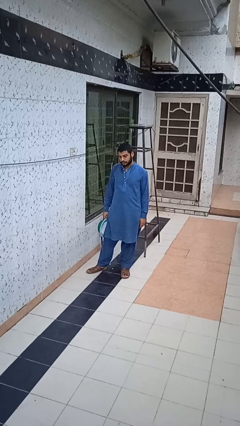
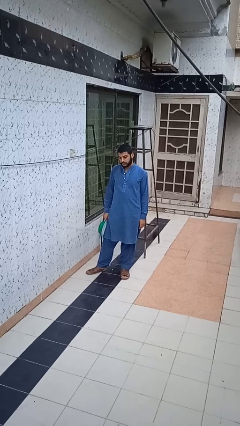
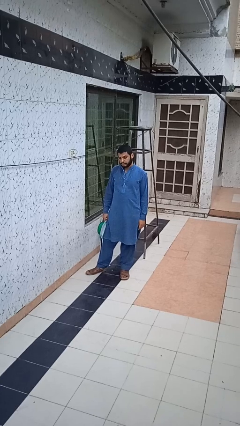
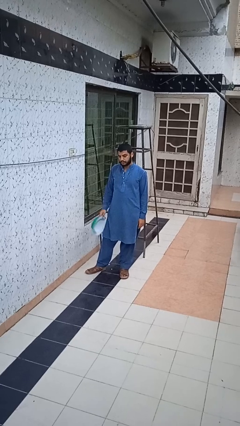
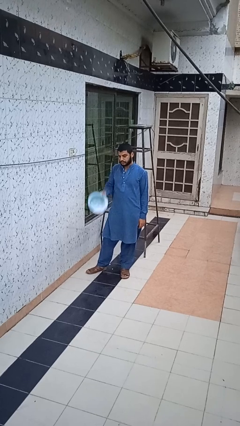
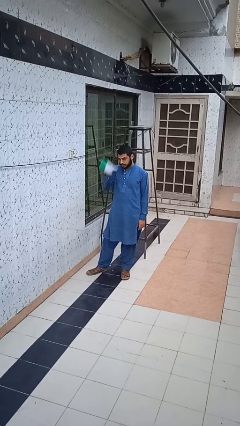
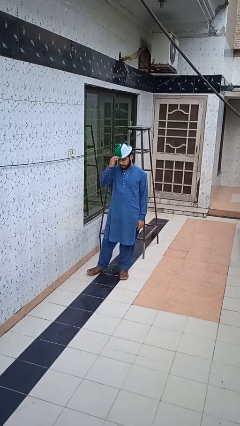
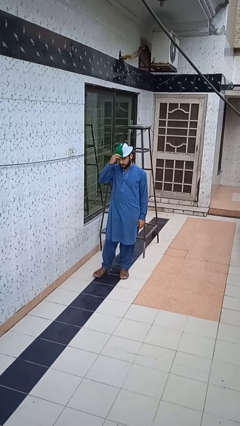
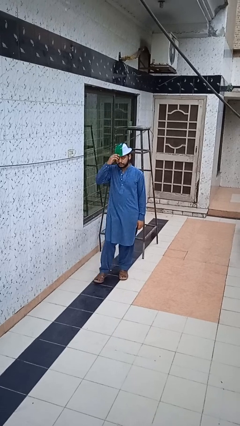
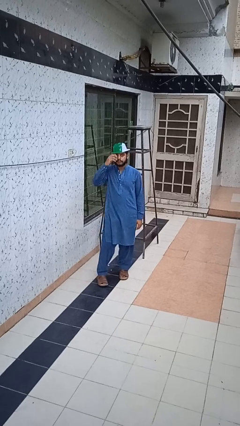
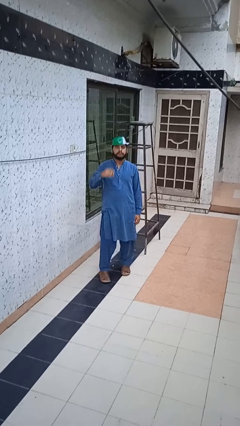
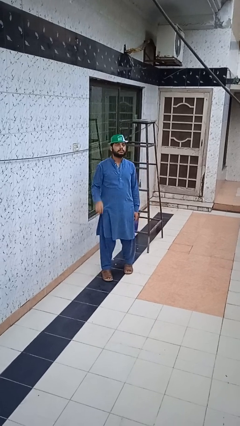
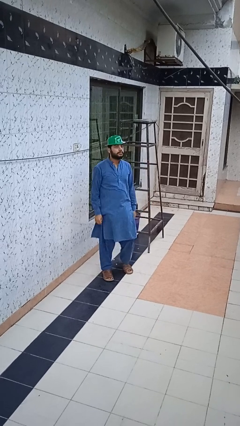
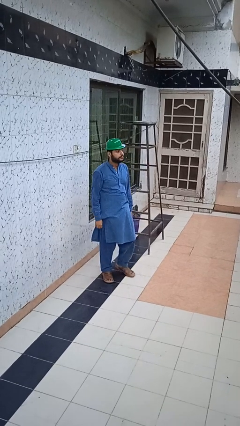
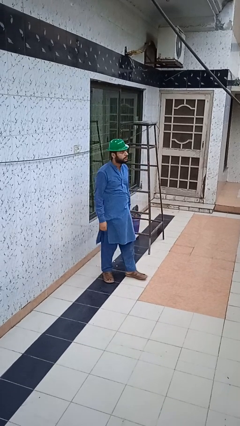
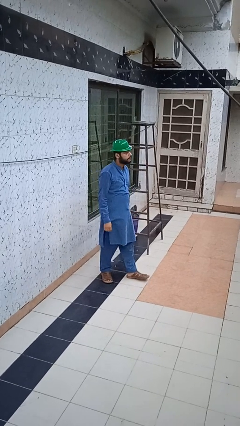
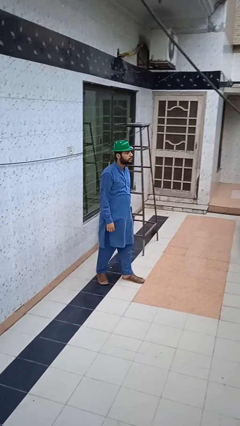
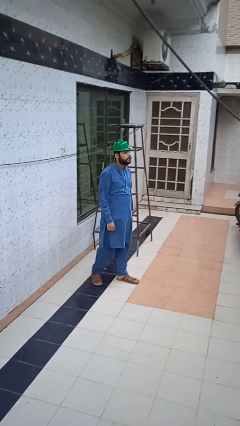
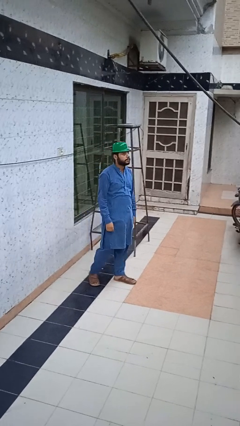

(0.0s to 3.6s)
person puts on hat

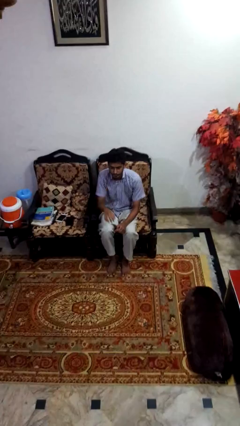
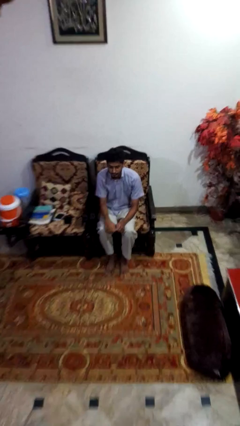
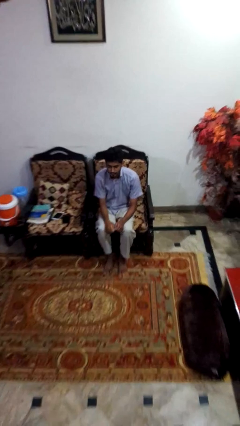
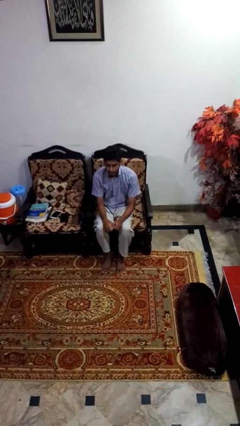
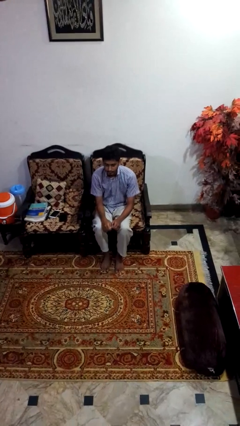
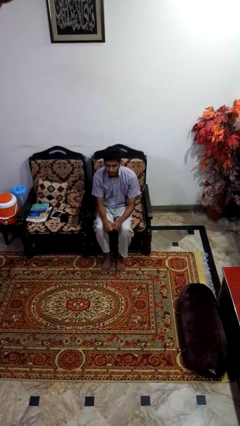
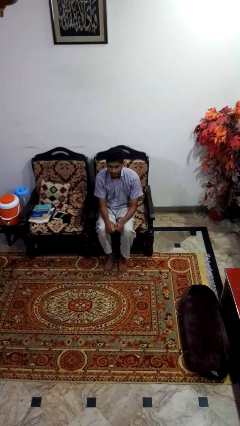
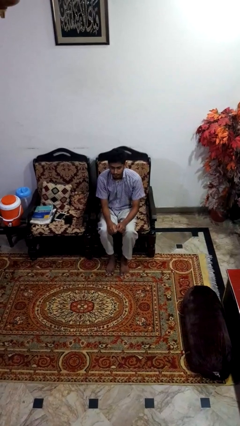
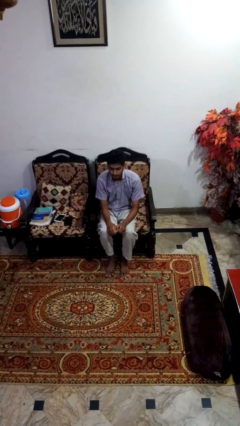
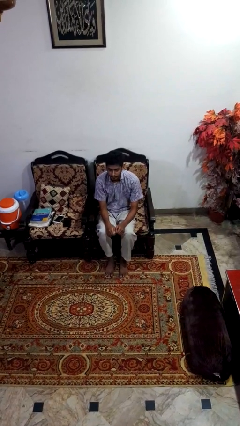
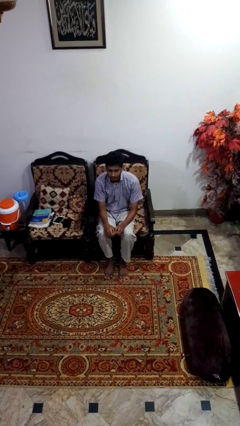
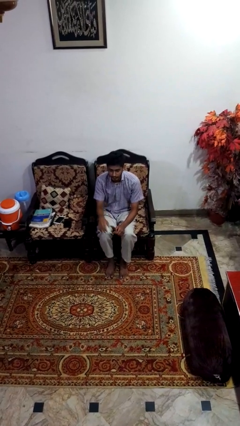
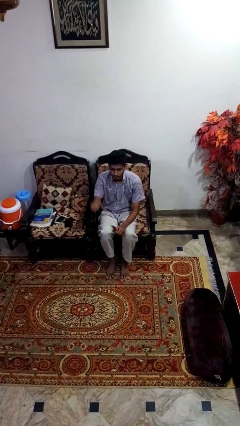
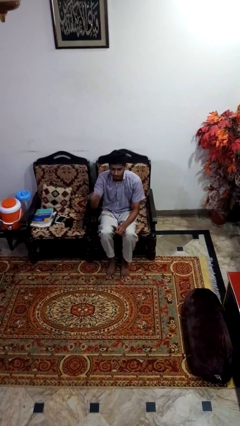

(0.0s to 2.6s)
person gestures lower hand

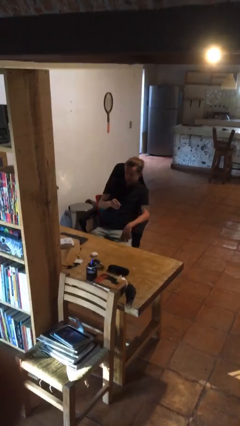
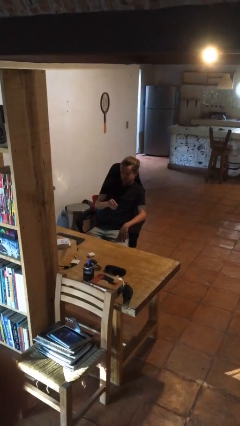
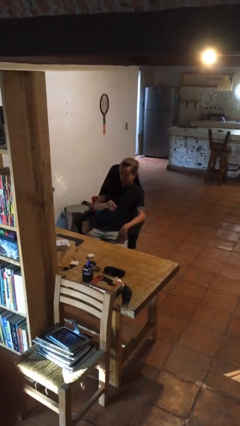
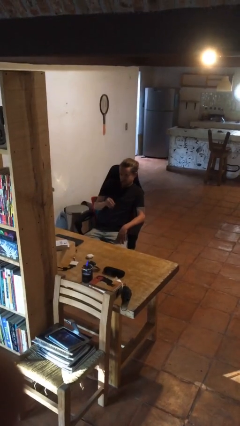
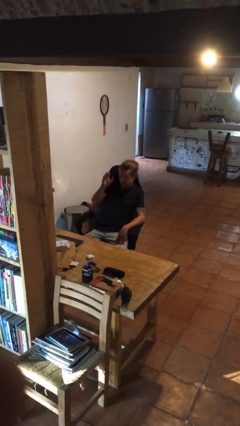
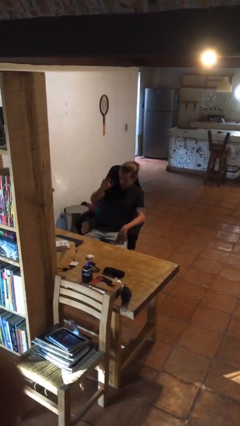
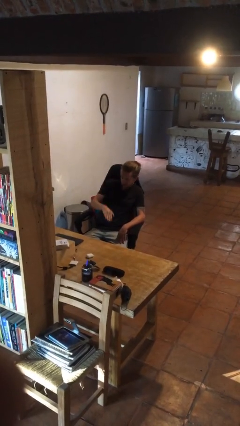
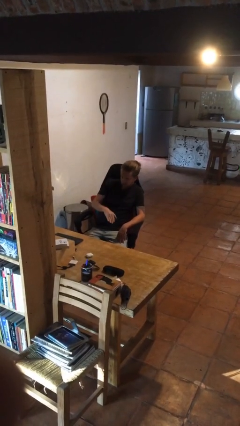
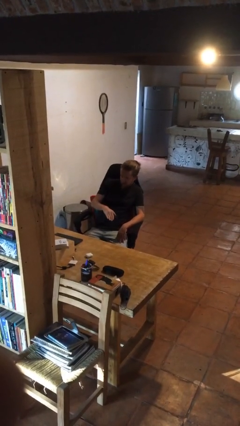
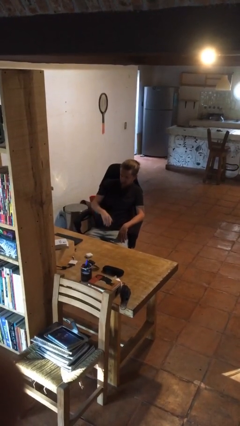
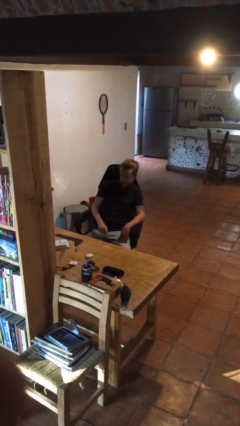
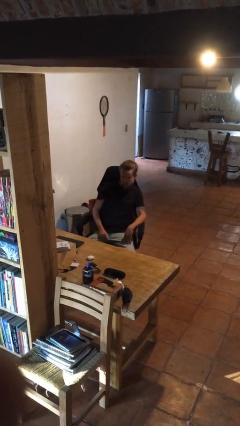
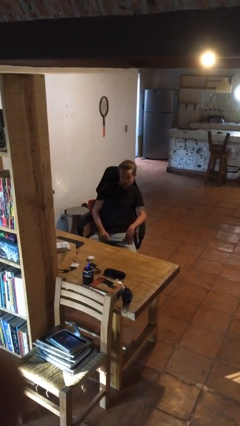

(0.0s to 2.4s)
person gestures swipe down

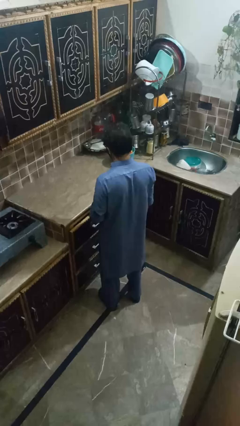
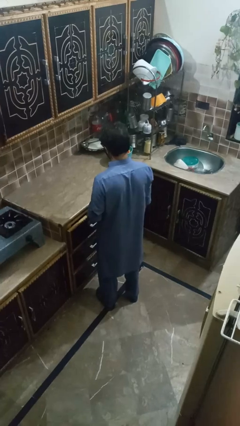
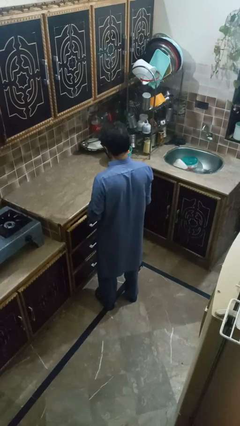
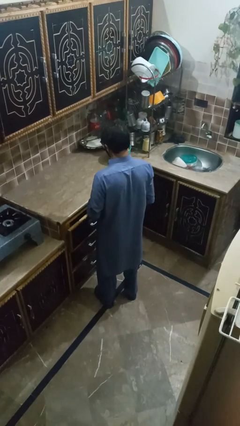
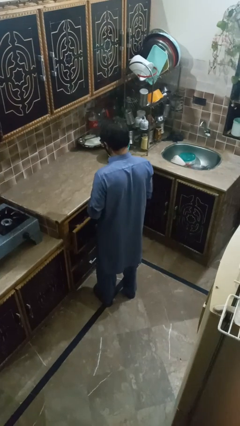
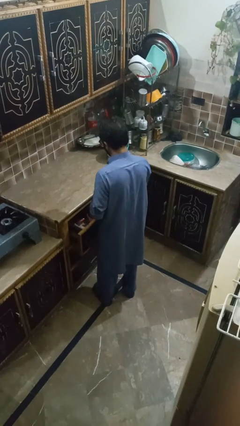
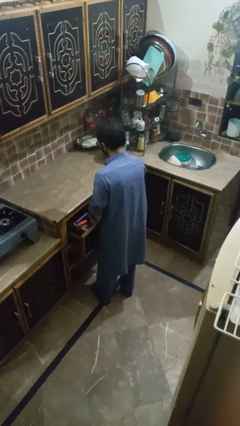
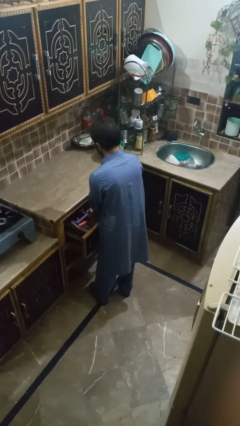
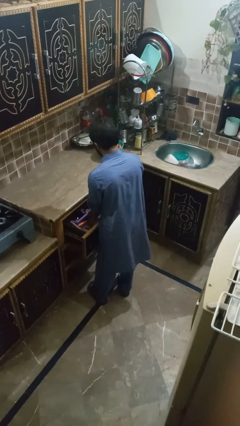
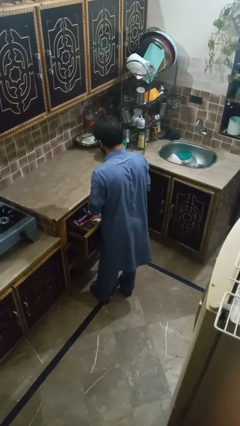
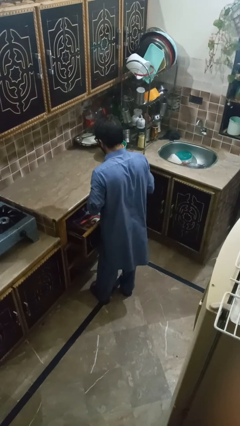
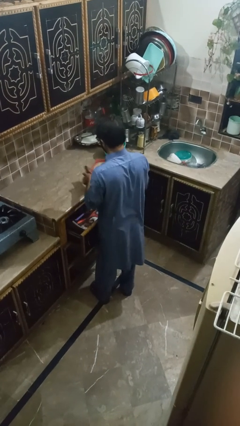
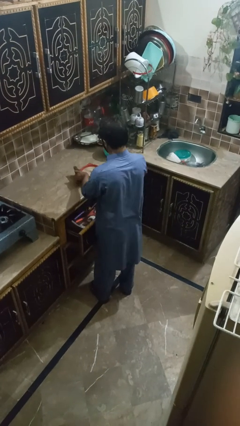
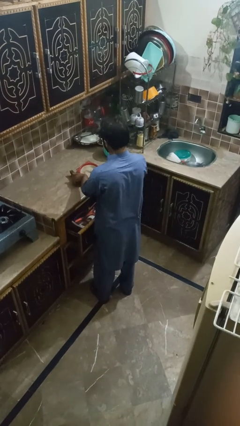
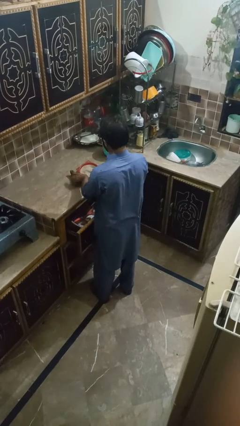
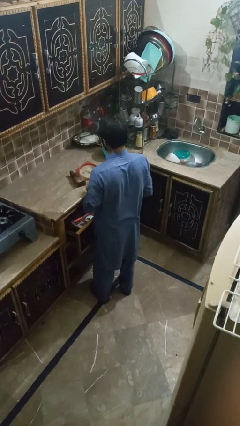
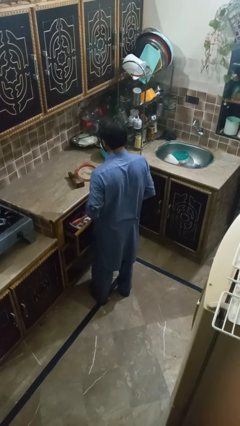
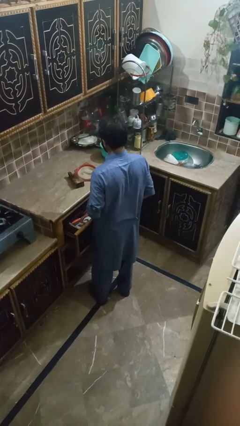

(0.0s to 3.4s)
person takes object from kitchen drawer

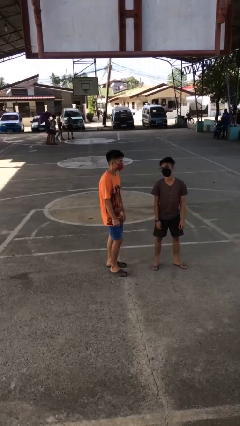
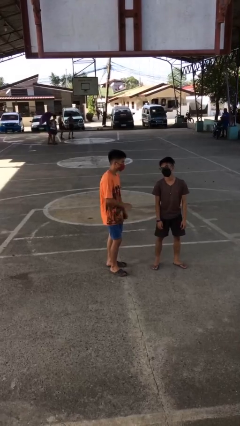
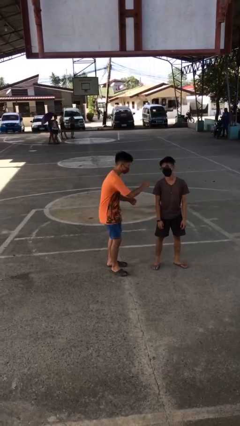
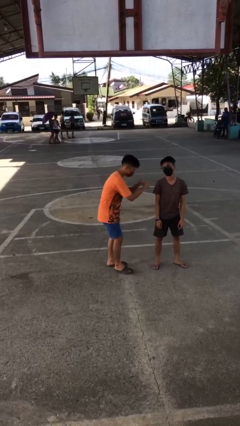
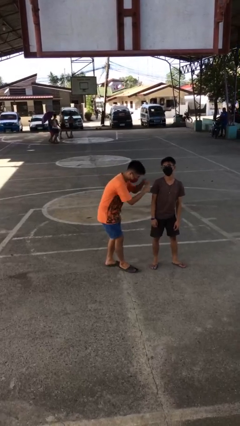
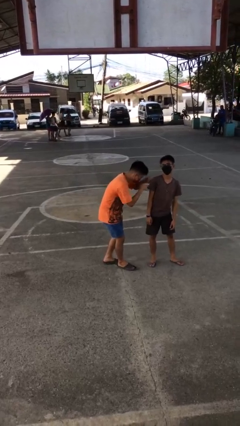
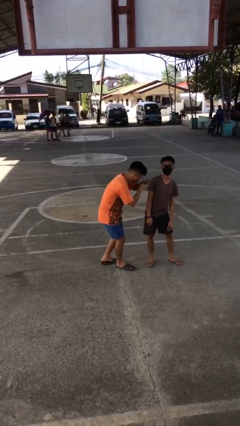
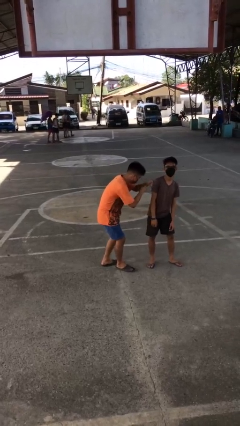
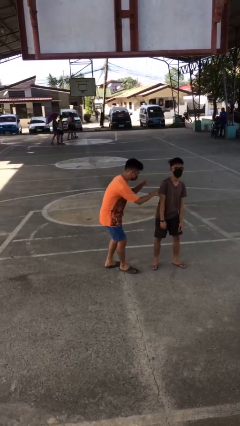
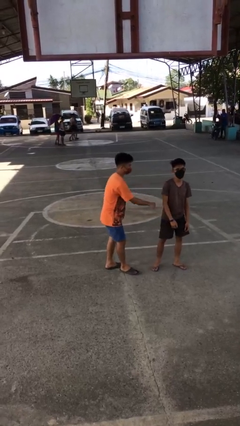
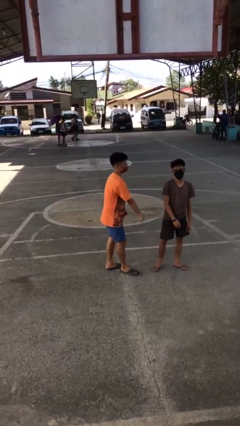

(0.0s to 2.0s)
person pounds shoulders of person

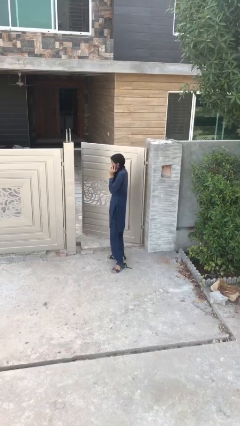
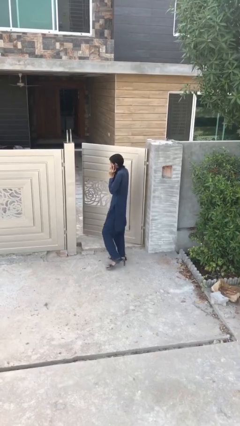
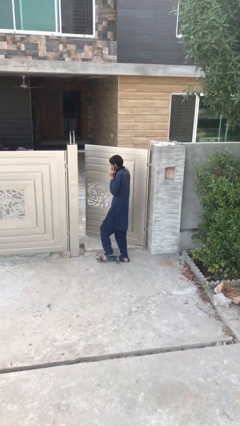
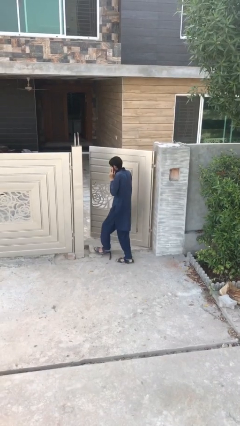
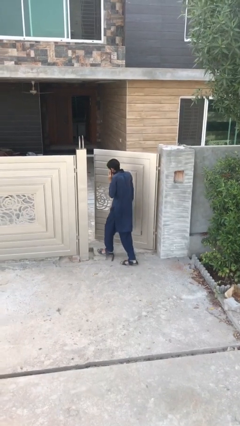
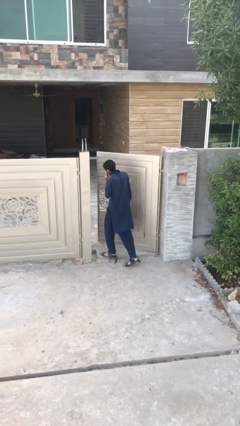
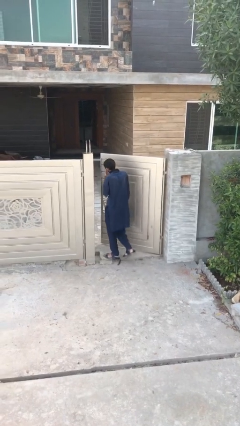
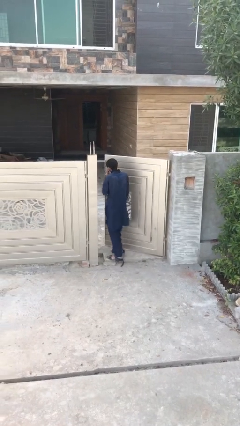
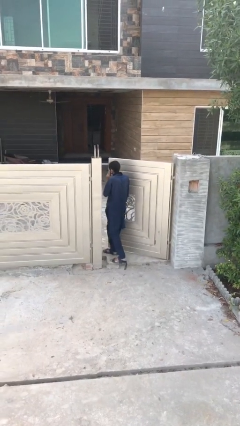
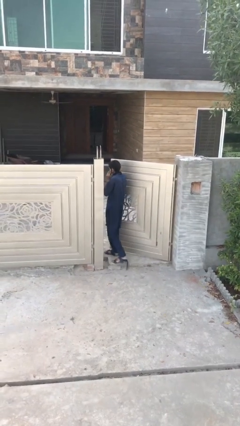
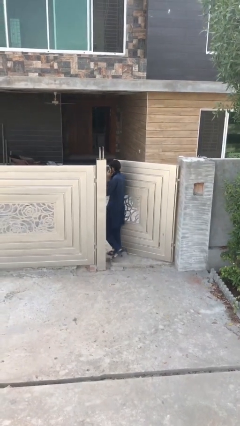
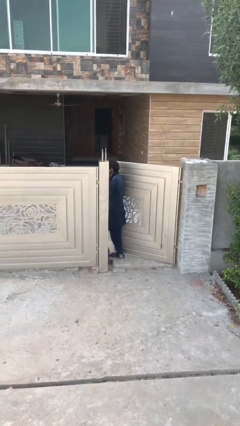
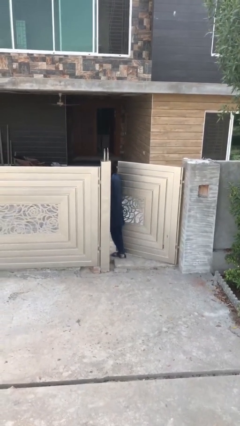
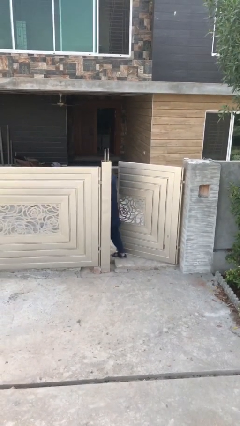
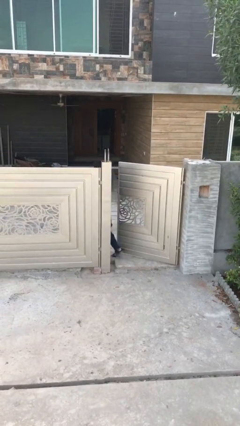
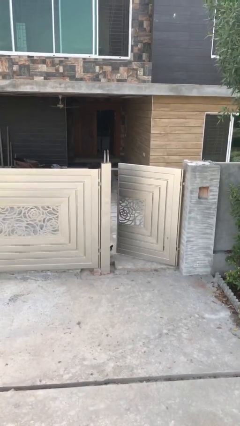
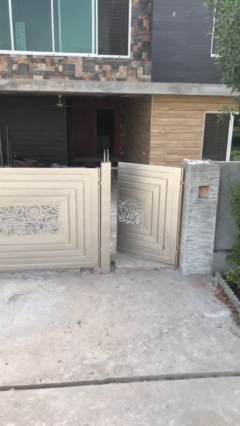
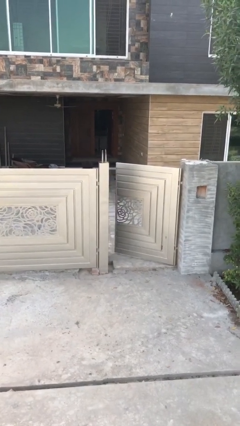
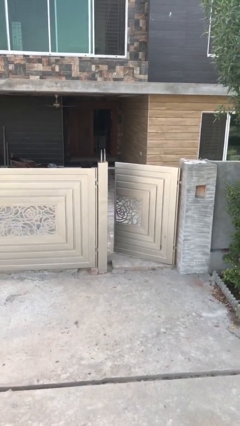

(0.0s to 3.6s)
person exits scene through structure
